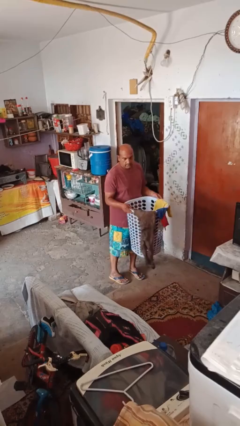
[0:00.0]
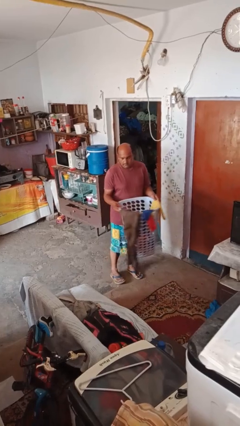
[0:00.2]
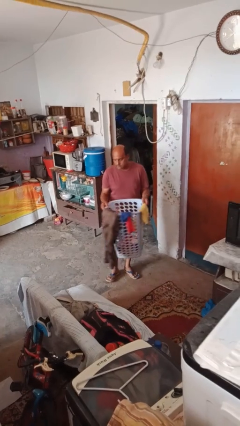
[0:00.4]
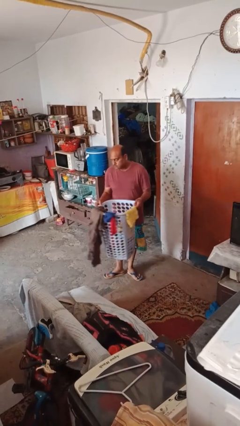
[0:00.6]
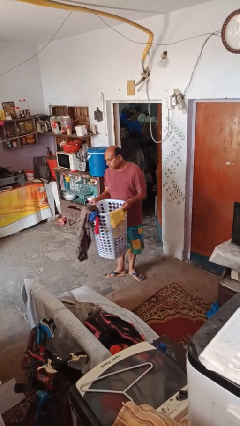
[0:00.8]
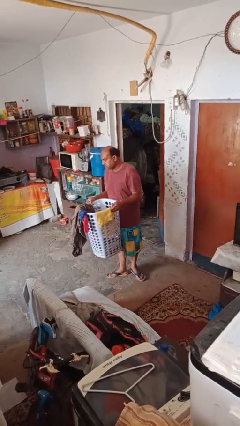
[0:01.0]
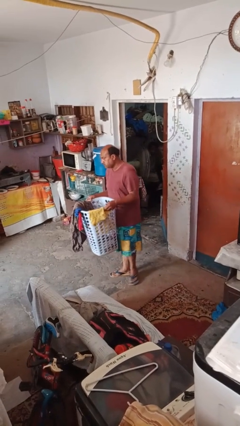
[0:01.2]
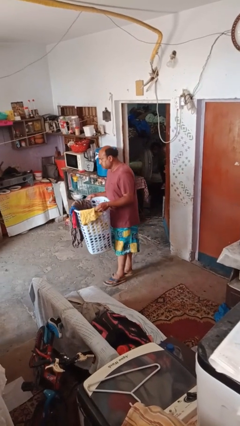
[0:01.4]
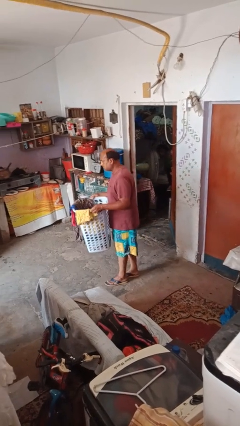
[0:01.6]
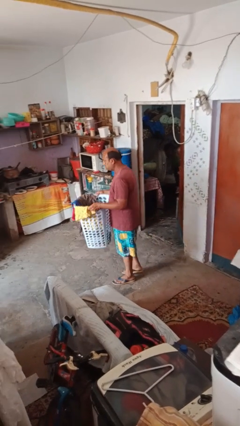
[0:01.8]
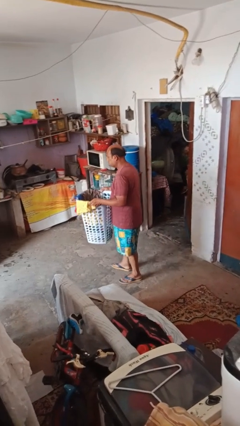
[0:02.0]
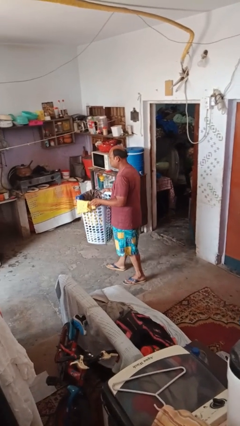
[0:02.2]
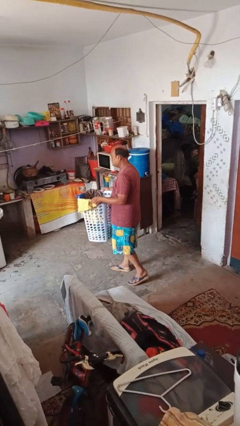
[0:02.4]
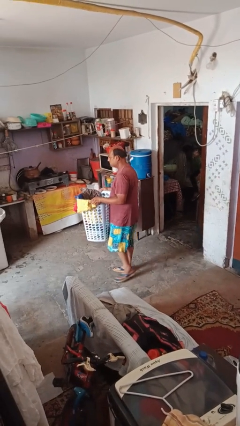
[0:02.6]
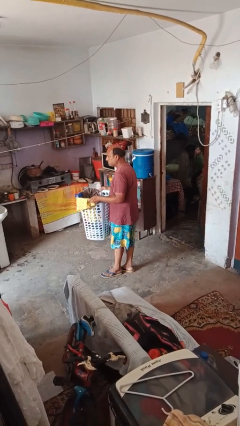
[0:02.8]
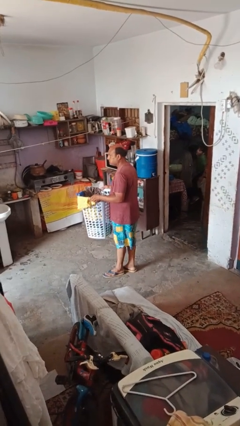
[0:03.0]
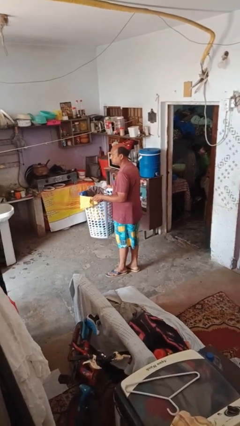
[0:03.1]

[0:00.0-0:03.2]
person carries laundry basket

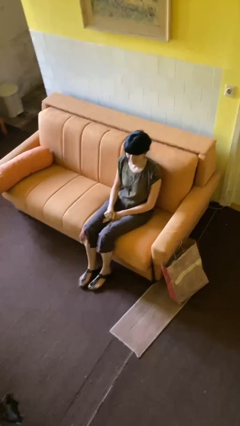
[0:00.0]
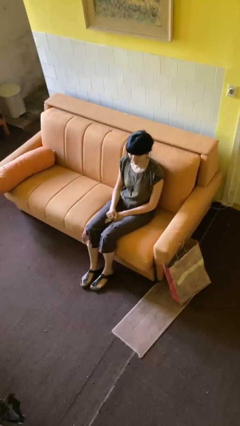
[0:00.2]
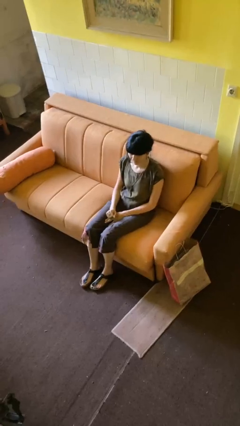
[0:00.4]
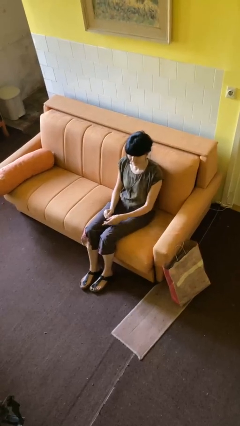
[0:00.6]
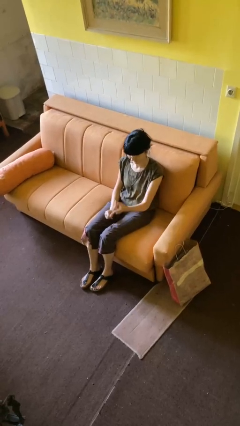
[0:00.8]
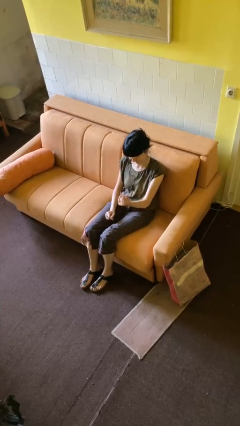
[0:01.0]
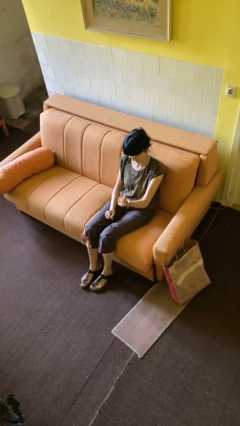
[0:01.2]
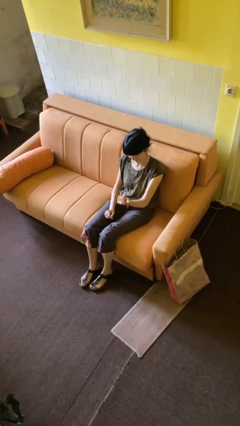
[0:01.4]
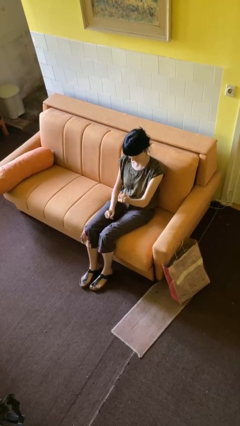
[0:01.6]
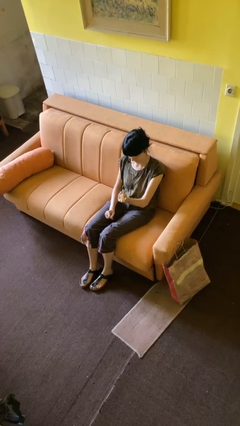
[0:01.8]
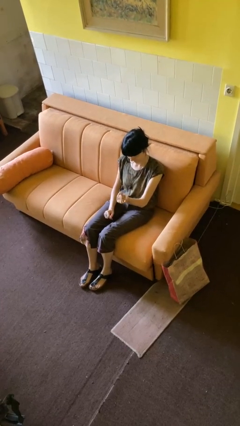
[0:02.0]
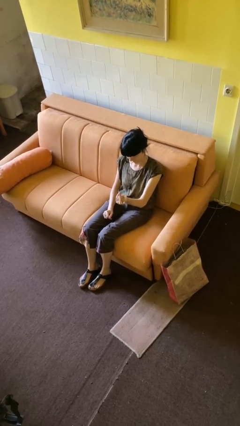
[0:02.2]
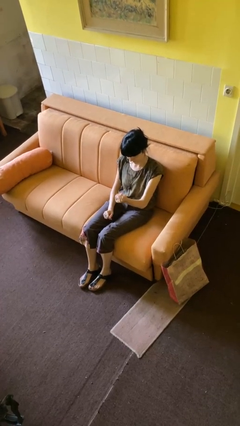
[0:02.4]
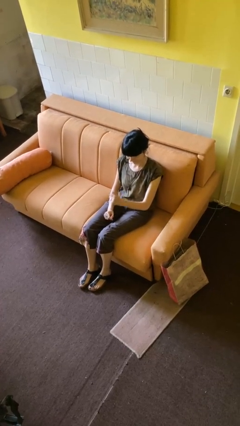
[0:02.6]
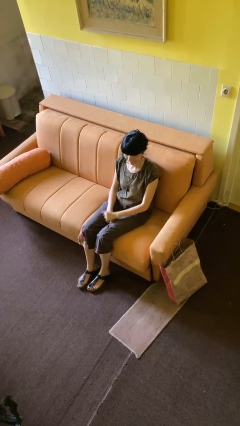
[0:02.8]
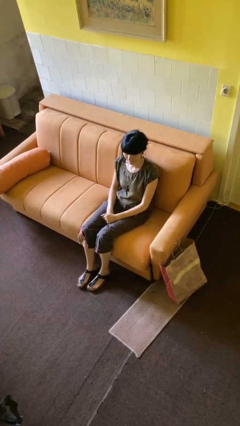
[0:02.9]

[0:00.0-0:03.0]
person gestures come here

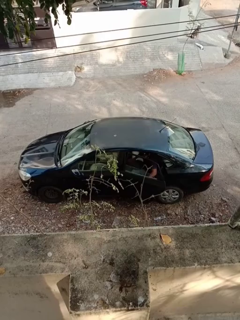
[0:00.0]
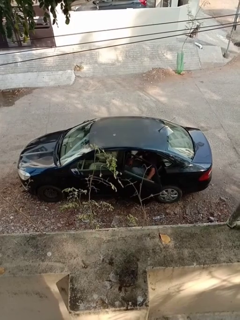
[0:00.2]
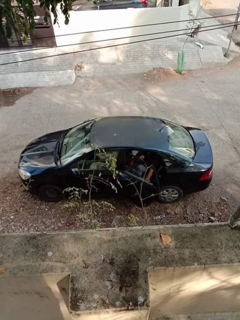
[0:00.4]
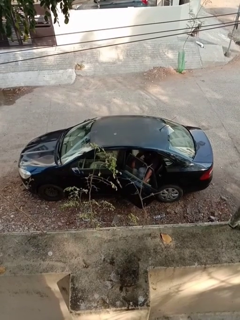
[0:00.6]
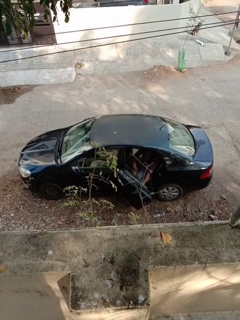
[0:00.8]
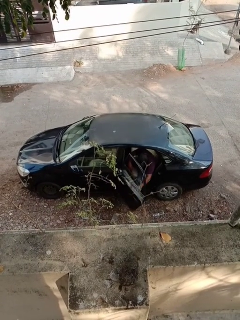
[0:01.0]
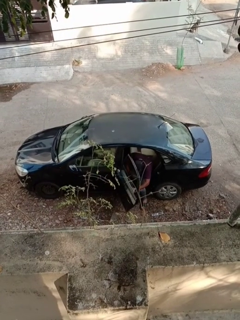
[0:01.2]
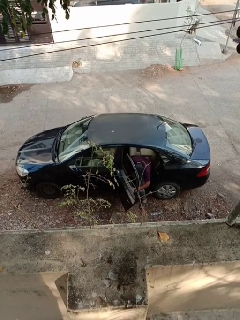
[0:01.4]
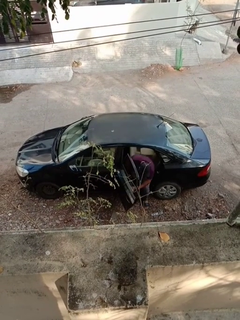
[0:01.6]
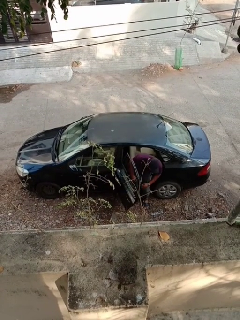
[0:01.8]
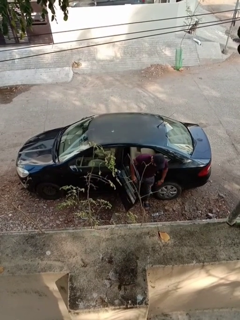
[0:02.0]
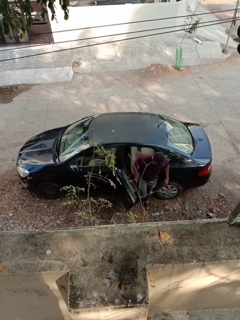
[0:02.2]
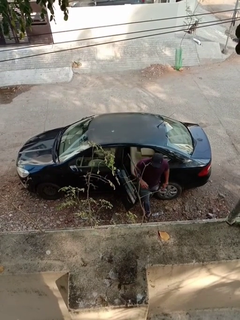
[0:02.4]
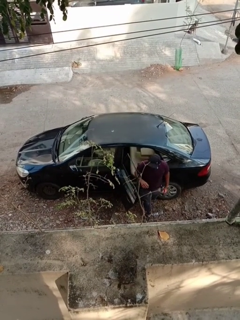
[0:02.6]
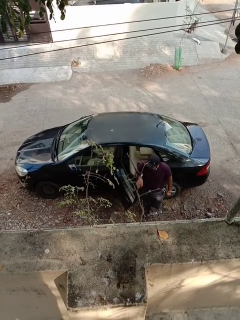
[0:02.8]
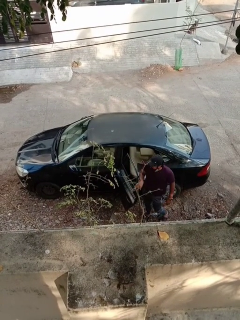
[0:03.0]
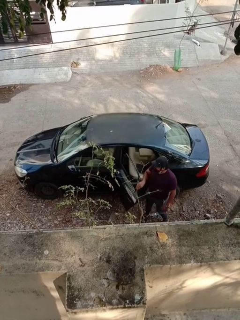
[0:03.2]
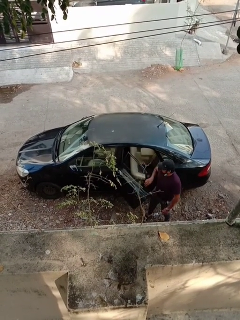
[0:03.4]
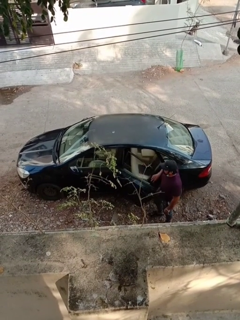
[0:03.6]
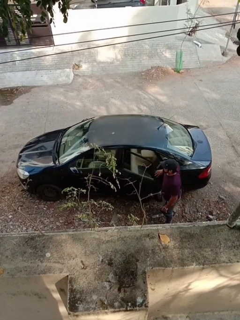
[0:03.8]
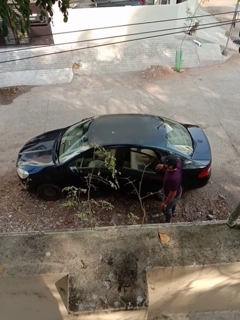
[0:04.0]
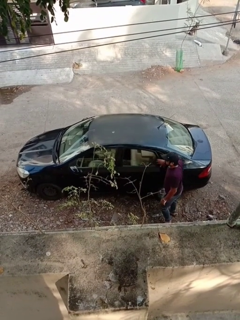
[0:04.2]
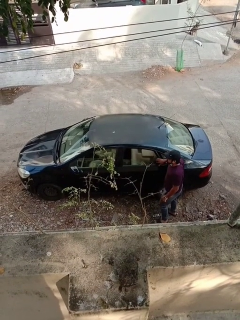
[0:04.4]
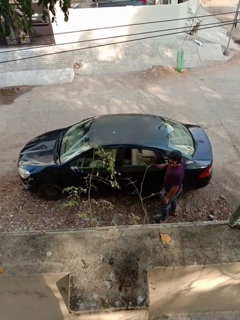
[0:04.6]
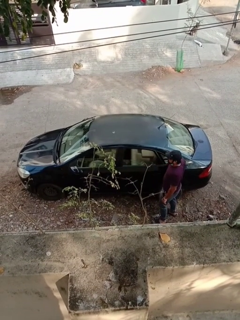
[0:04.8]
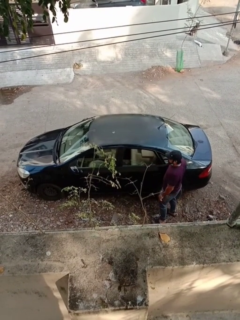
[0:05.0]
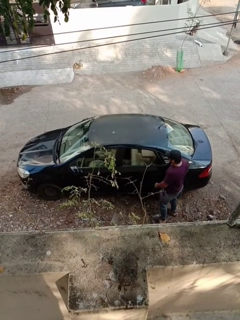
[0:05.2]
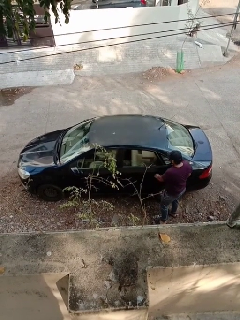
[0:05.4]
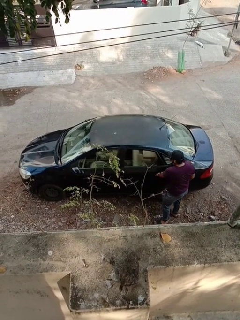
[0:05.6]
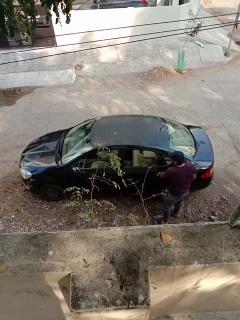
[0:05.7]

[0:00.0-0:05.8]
car drops off person

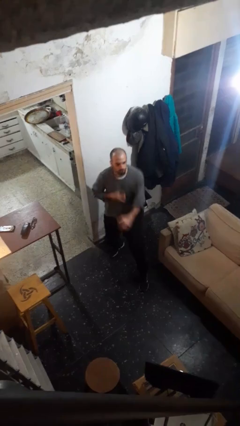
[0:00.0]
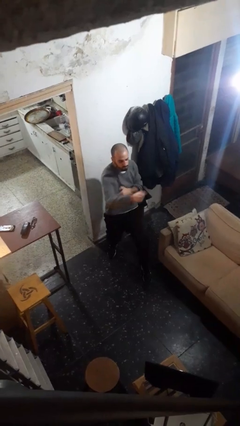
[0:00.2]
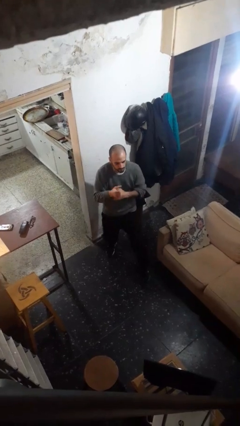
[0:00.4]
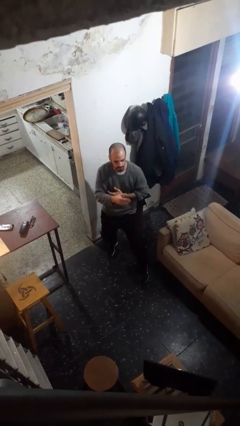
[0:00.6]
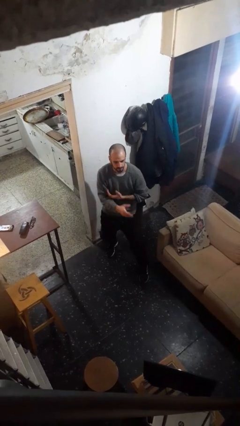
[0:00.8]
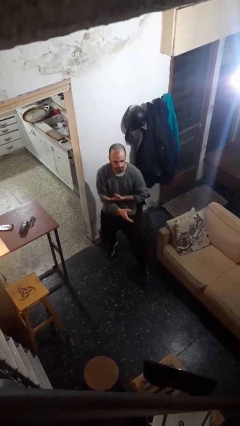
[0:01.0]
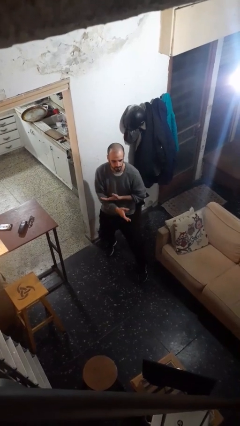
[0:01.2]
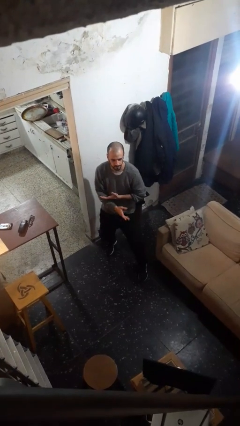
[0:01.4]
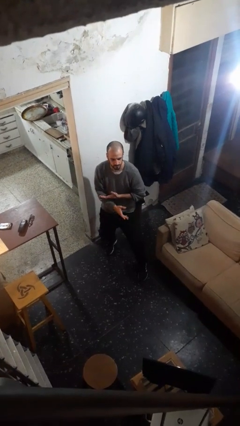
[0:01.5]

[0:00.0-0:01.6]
person karate chop

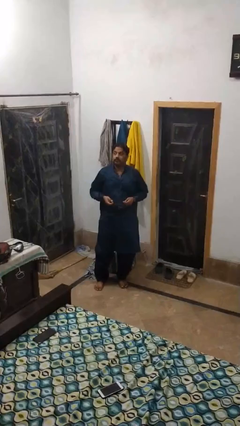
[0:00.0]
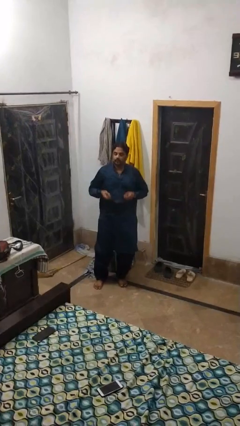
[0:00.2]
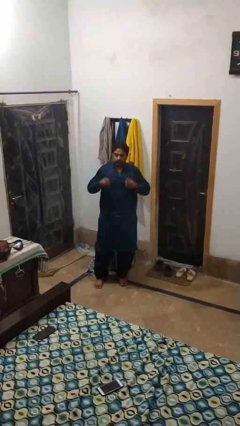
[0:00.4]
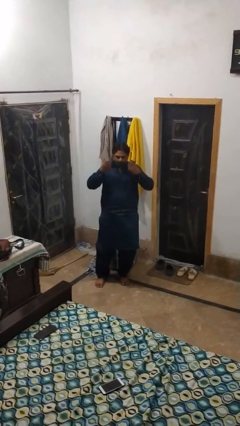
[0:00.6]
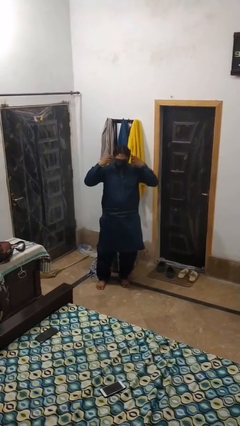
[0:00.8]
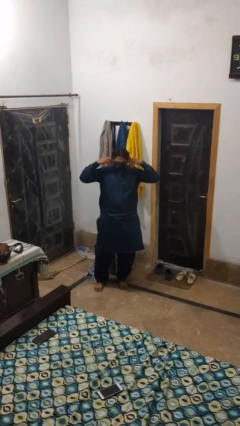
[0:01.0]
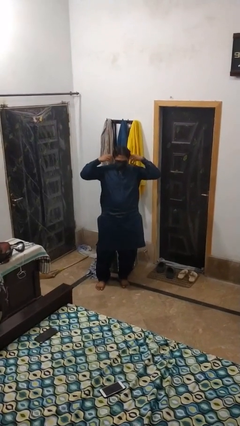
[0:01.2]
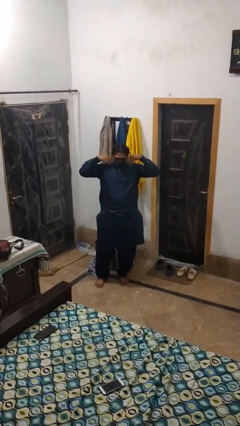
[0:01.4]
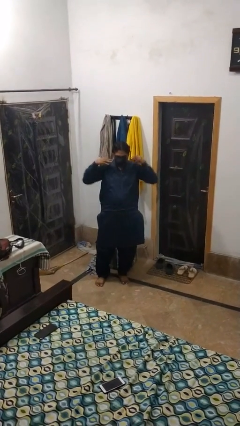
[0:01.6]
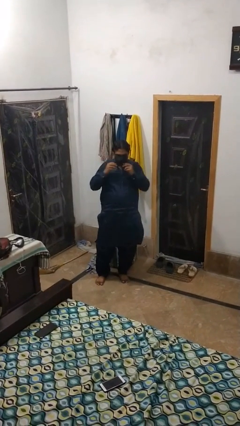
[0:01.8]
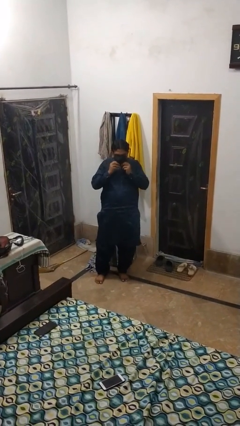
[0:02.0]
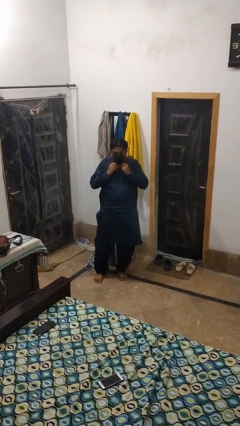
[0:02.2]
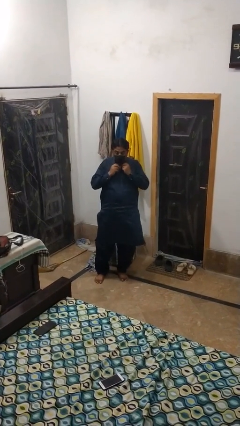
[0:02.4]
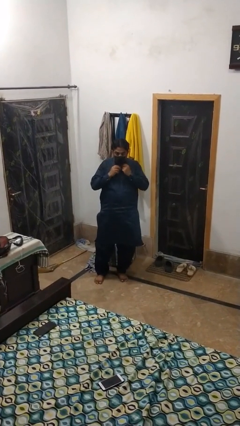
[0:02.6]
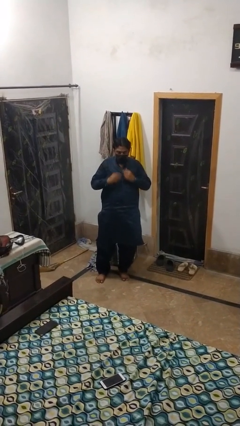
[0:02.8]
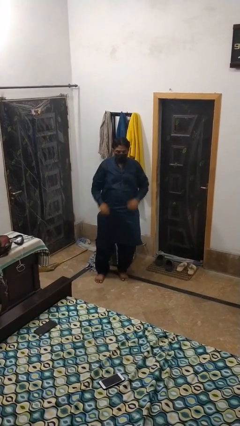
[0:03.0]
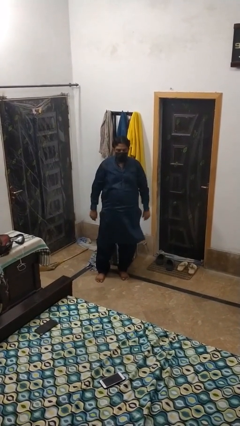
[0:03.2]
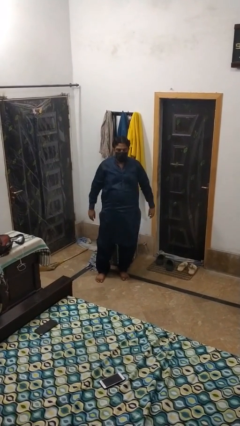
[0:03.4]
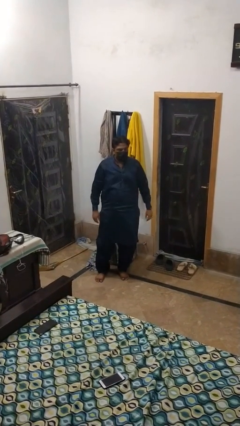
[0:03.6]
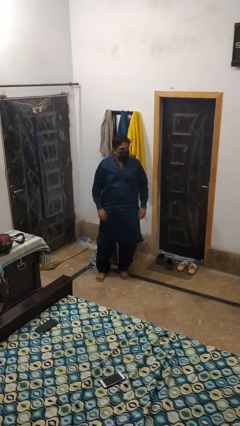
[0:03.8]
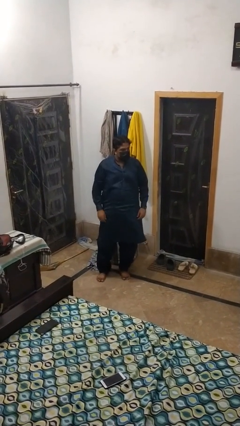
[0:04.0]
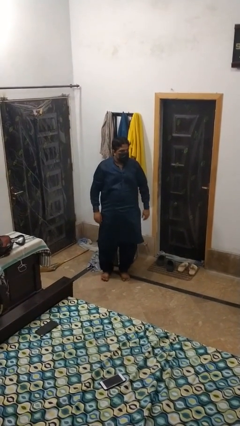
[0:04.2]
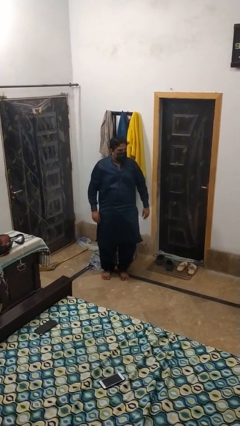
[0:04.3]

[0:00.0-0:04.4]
person puts on facemask

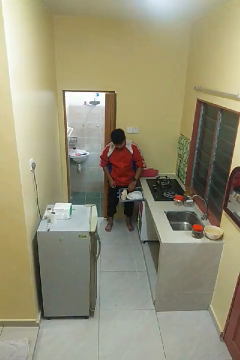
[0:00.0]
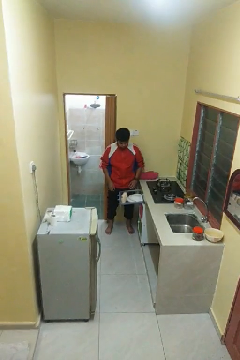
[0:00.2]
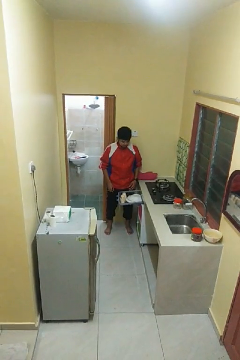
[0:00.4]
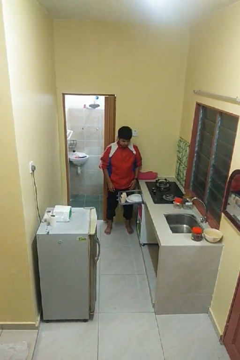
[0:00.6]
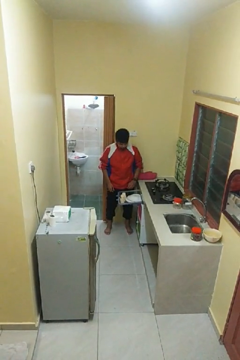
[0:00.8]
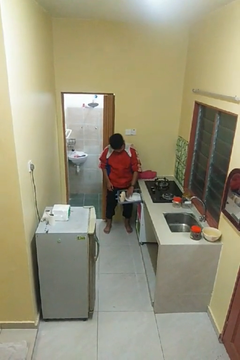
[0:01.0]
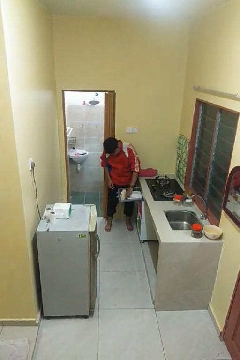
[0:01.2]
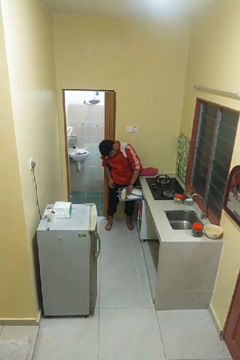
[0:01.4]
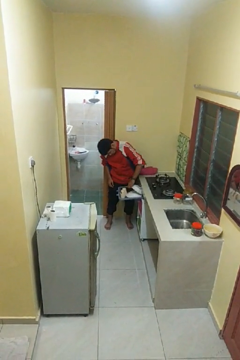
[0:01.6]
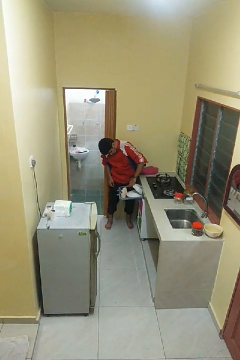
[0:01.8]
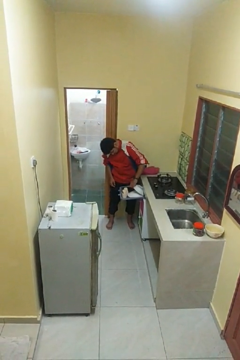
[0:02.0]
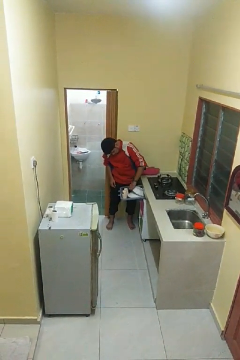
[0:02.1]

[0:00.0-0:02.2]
person searches in kitchen drawer
